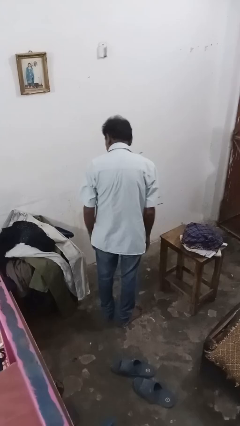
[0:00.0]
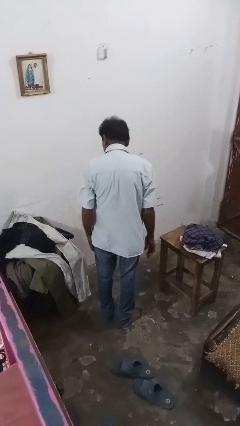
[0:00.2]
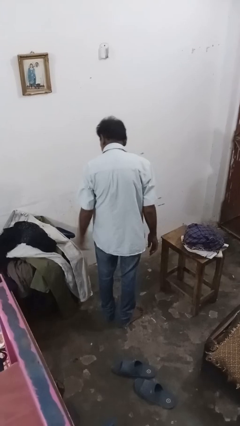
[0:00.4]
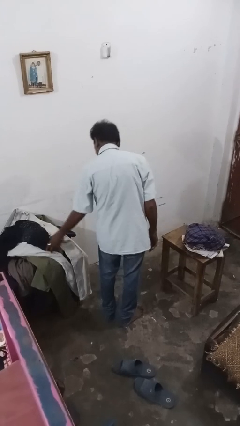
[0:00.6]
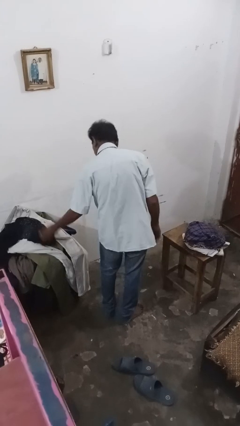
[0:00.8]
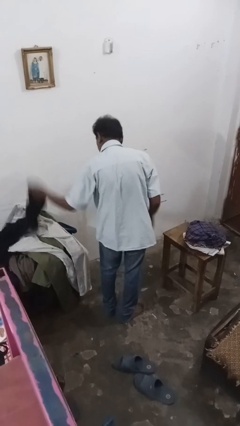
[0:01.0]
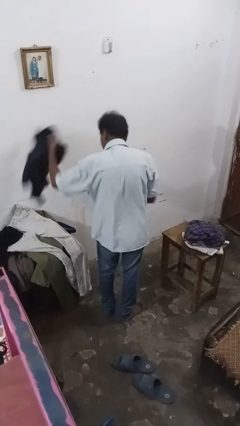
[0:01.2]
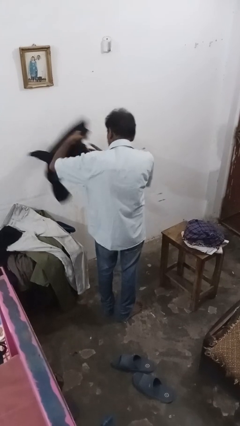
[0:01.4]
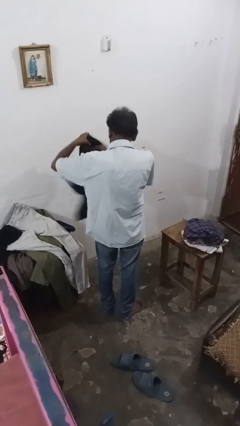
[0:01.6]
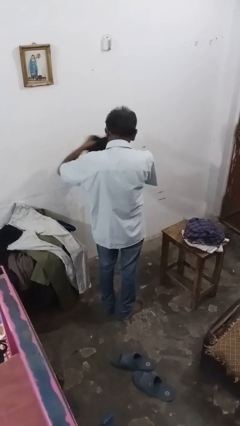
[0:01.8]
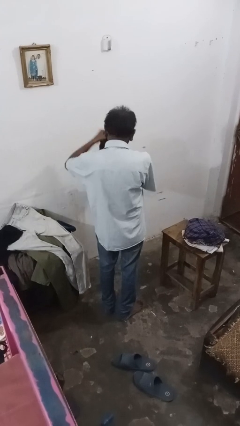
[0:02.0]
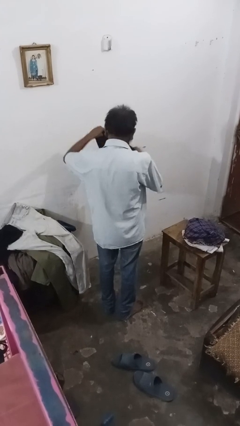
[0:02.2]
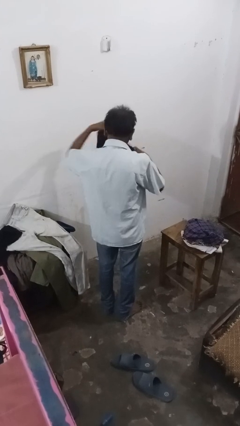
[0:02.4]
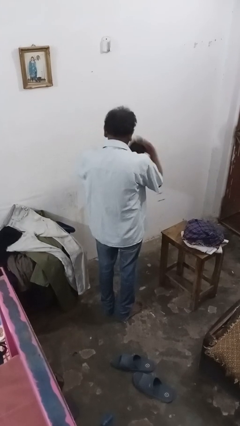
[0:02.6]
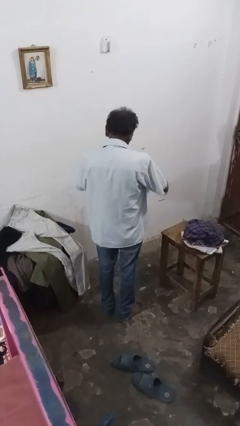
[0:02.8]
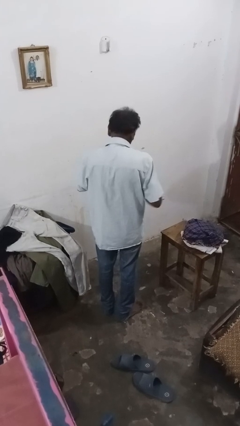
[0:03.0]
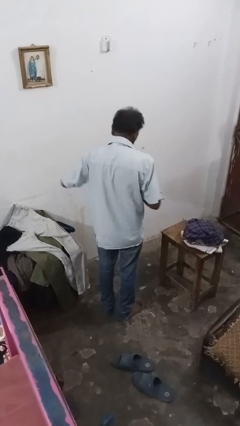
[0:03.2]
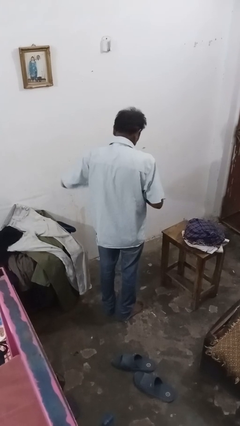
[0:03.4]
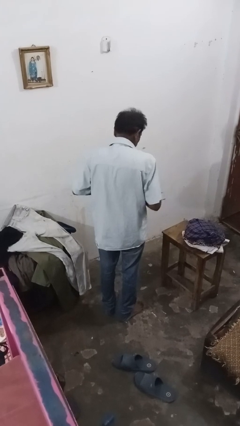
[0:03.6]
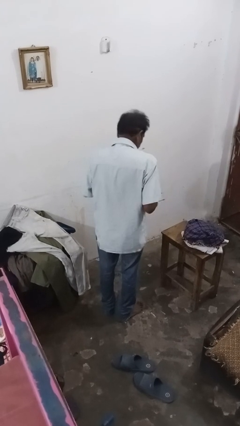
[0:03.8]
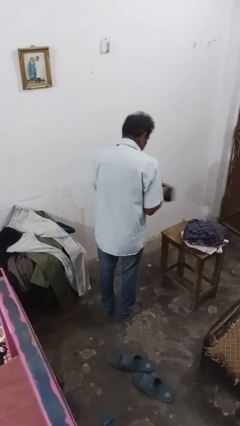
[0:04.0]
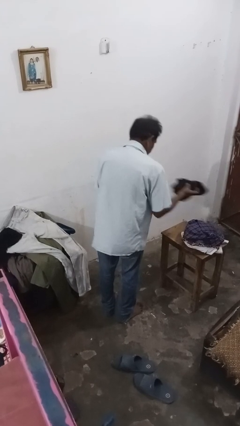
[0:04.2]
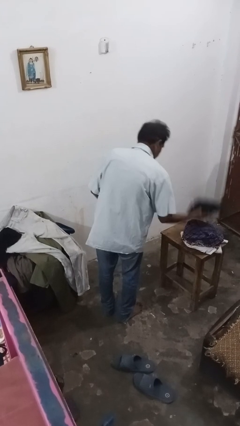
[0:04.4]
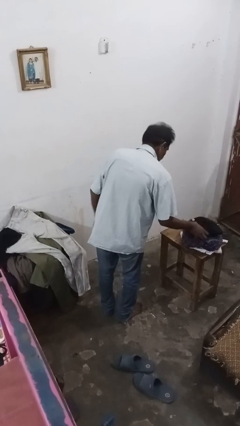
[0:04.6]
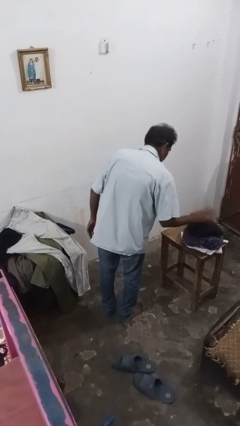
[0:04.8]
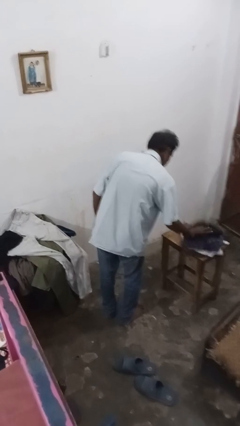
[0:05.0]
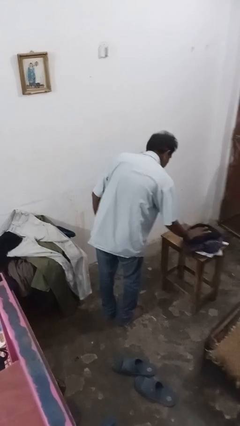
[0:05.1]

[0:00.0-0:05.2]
person folds shirt

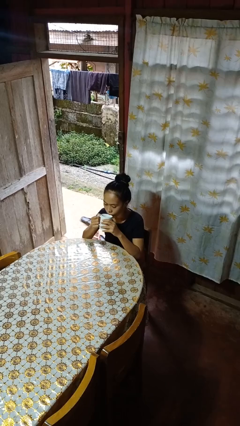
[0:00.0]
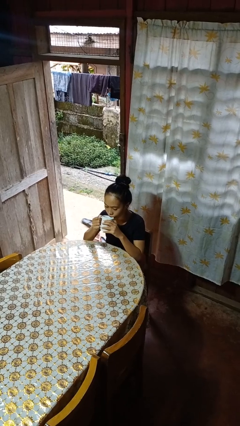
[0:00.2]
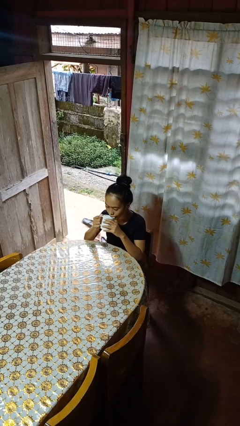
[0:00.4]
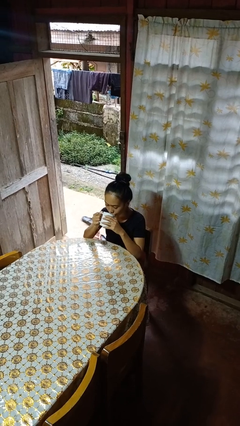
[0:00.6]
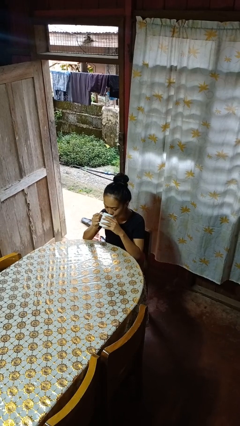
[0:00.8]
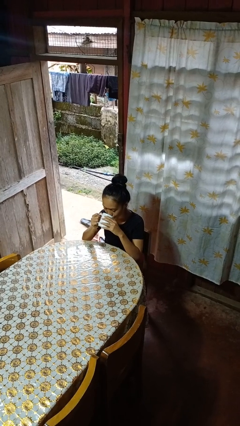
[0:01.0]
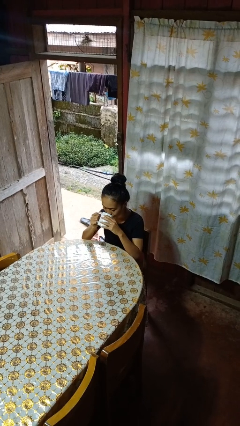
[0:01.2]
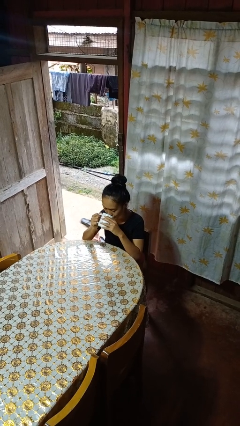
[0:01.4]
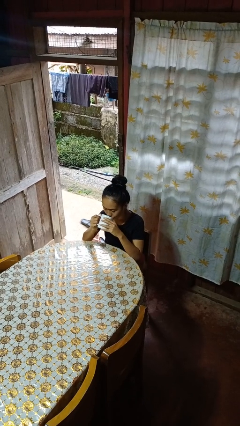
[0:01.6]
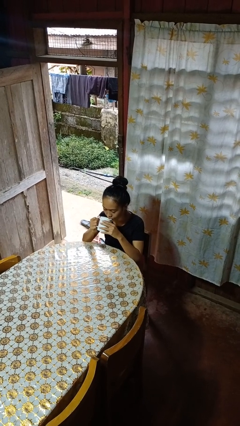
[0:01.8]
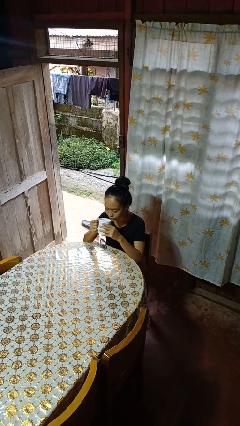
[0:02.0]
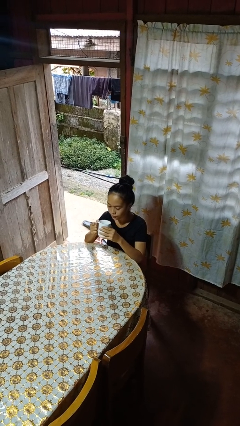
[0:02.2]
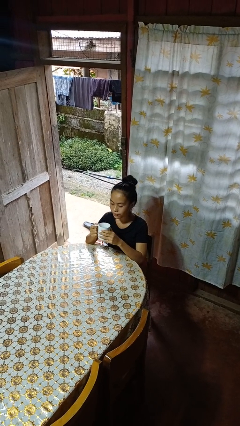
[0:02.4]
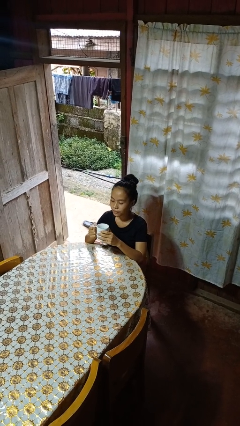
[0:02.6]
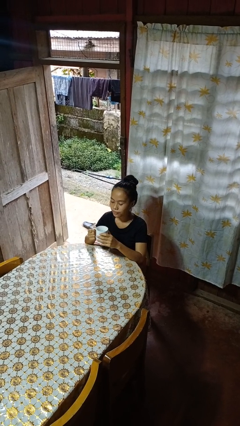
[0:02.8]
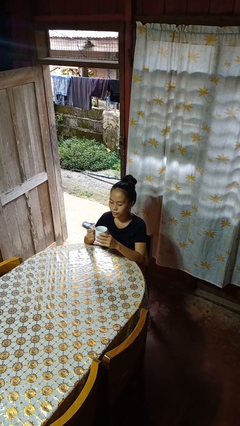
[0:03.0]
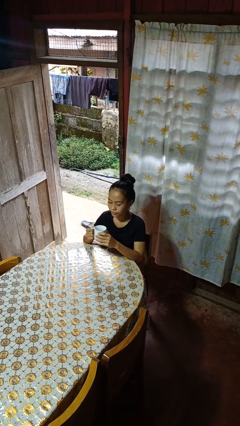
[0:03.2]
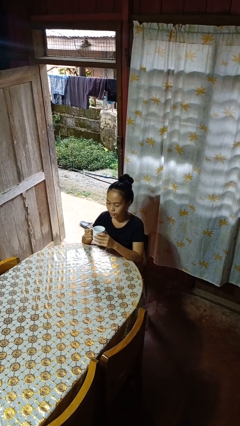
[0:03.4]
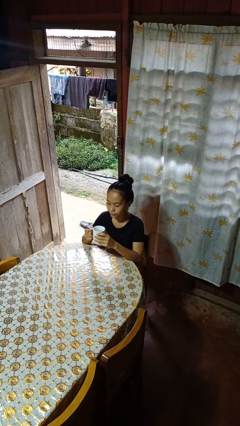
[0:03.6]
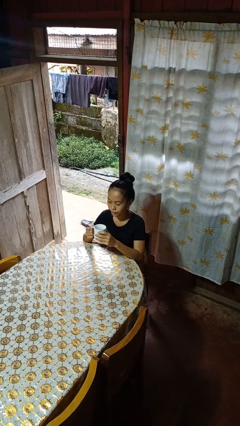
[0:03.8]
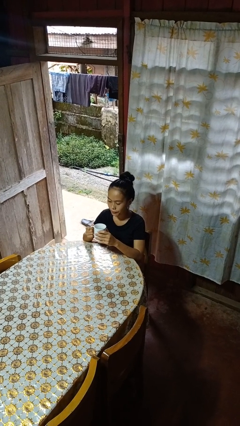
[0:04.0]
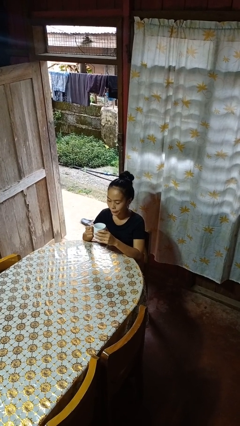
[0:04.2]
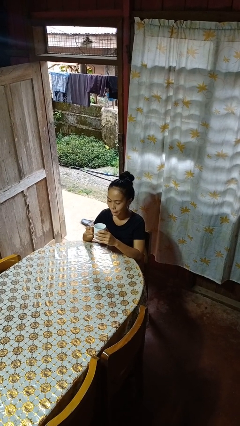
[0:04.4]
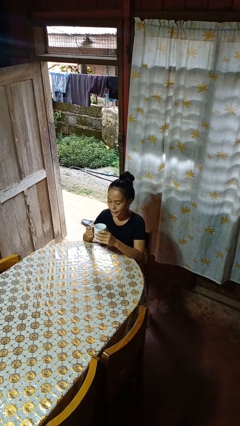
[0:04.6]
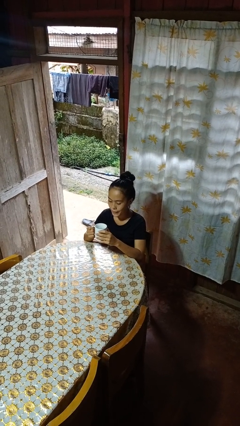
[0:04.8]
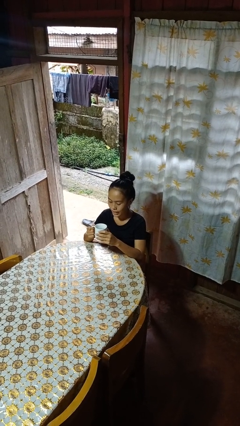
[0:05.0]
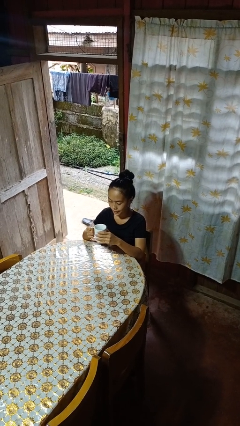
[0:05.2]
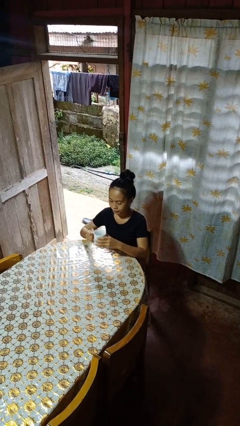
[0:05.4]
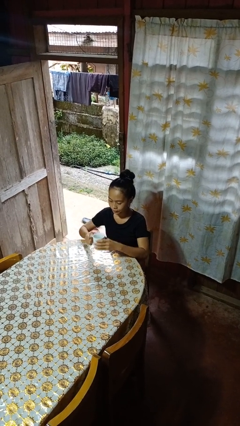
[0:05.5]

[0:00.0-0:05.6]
person drinks from mug

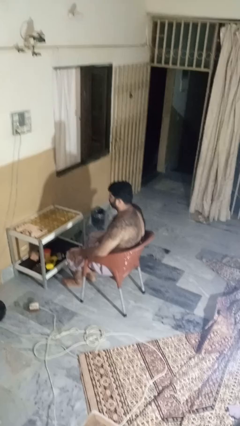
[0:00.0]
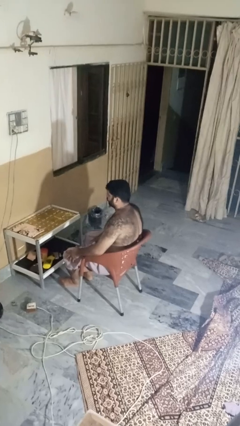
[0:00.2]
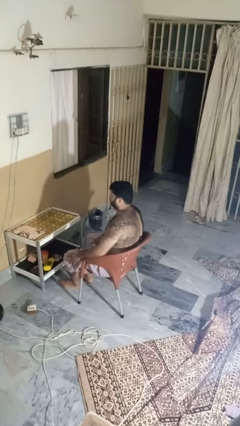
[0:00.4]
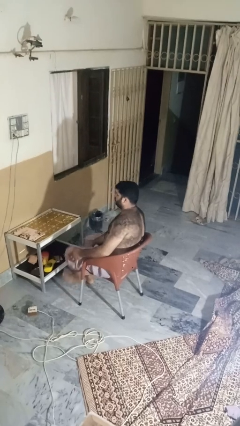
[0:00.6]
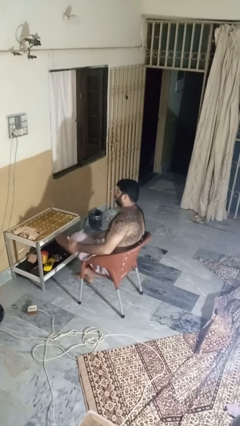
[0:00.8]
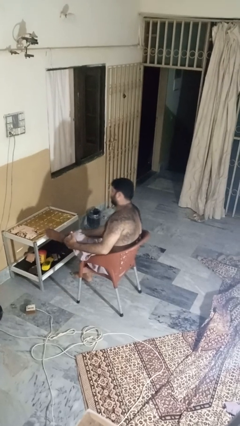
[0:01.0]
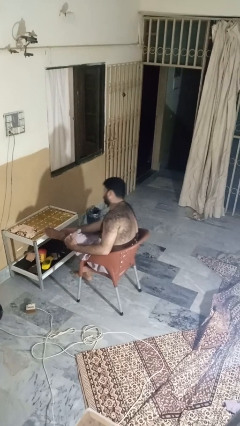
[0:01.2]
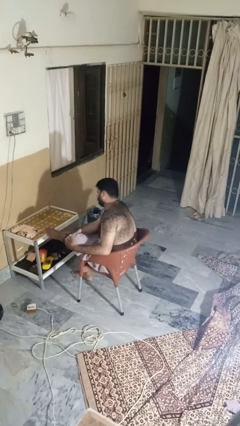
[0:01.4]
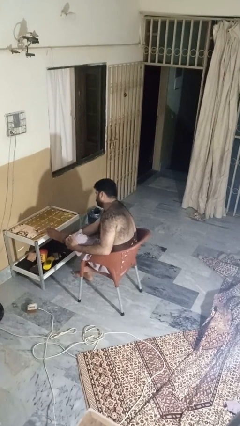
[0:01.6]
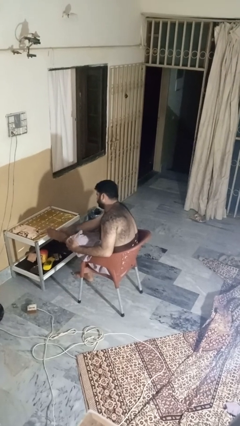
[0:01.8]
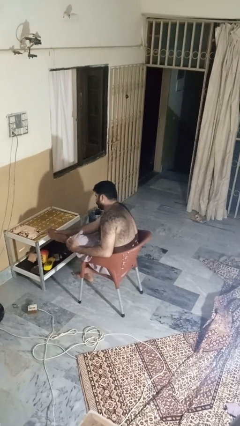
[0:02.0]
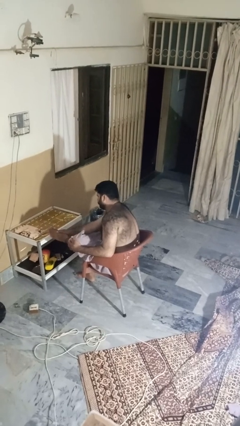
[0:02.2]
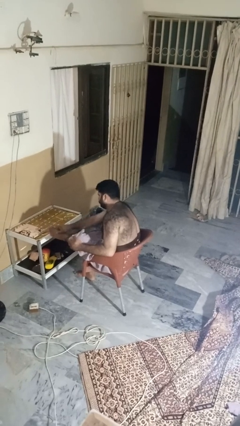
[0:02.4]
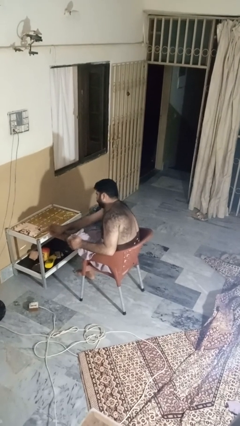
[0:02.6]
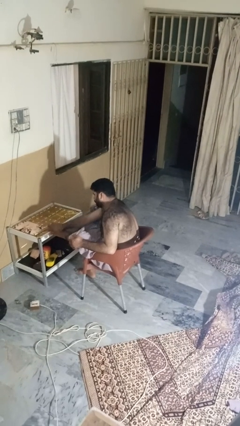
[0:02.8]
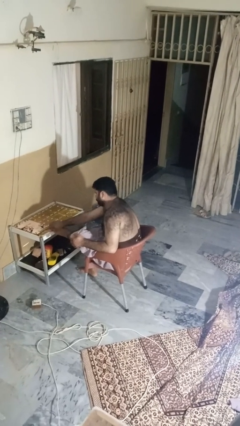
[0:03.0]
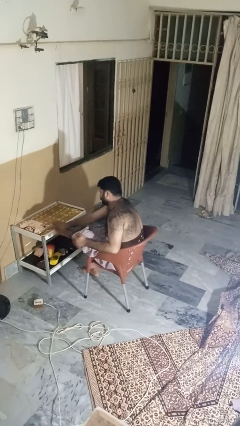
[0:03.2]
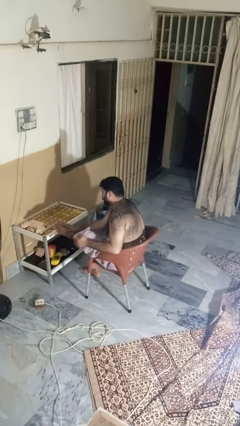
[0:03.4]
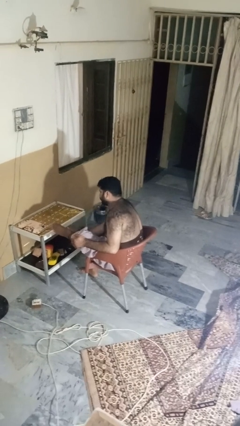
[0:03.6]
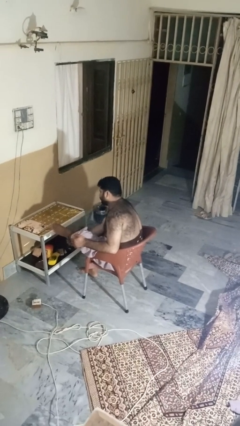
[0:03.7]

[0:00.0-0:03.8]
person stubs toe

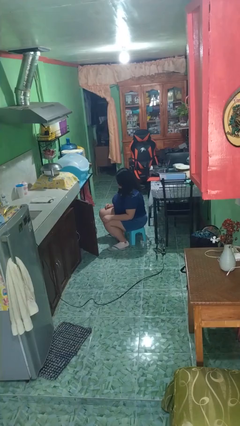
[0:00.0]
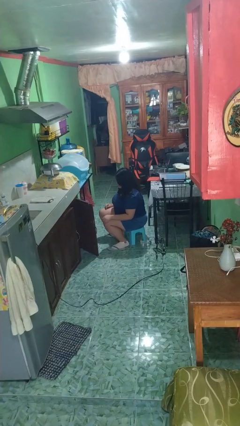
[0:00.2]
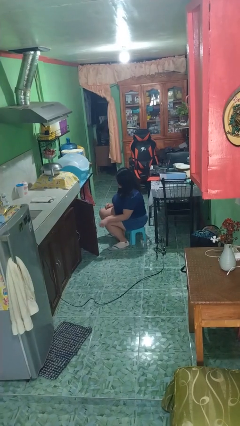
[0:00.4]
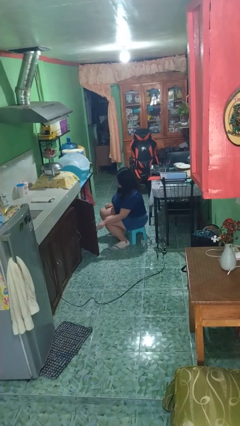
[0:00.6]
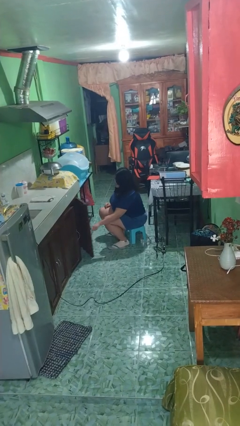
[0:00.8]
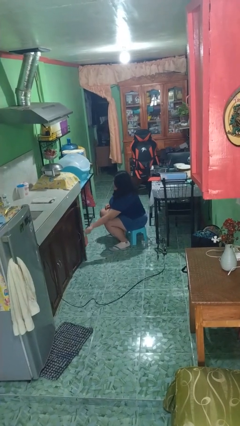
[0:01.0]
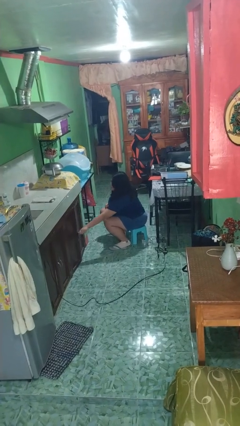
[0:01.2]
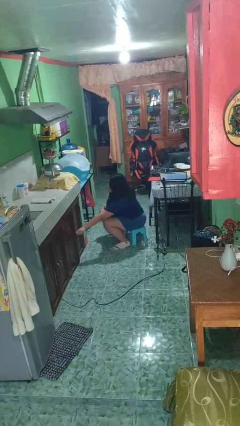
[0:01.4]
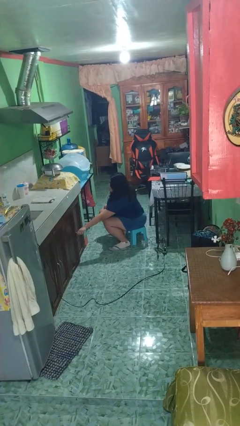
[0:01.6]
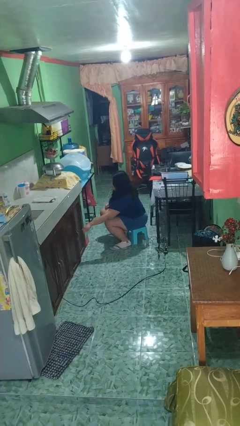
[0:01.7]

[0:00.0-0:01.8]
person closes cabinet

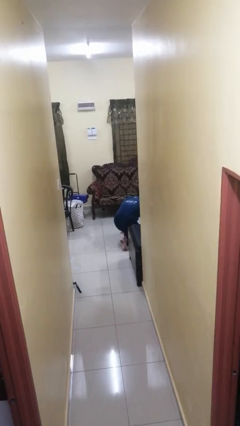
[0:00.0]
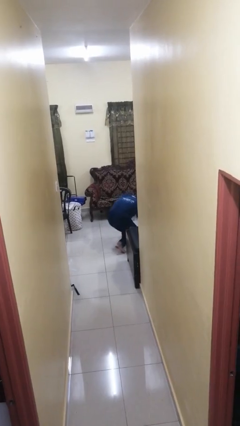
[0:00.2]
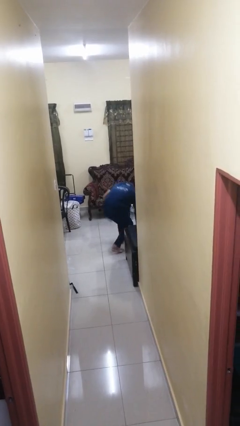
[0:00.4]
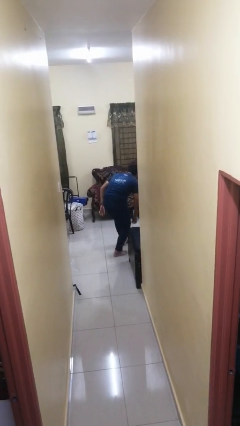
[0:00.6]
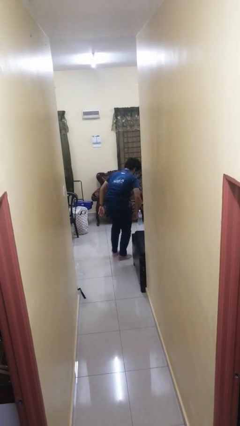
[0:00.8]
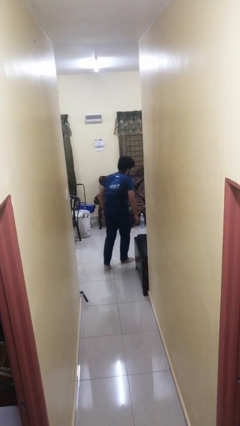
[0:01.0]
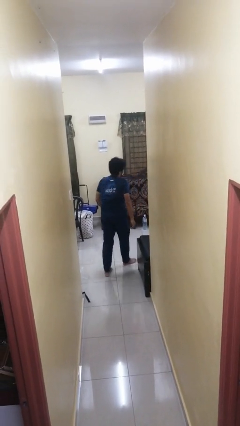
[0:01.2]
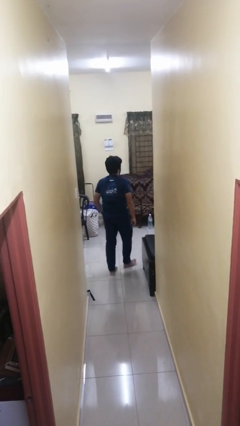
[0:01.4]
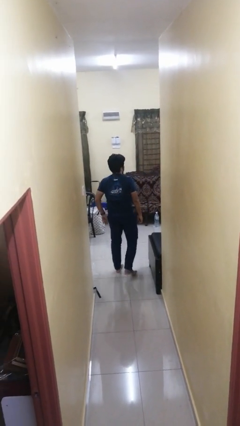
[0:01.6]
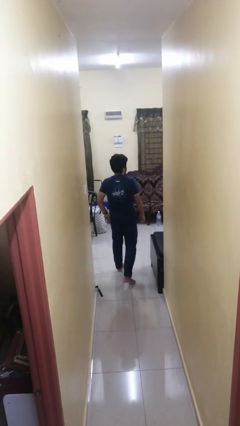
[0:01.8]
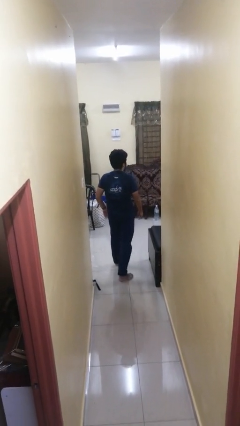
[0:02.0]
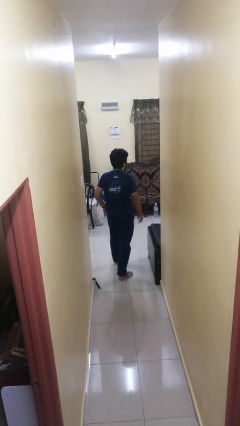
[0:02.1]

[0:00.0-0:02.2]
person stands up from floor
